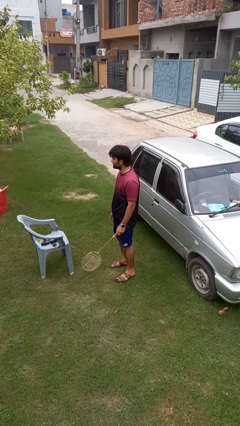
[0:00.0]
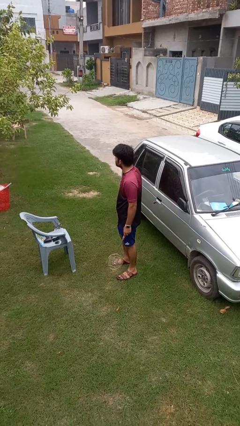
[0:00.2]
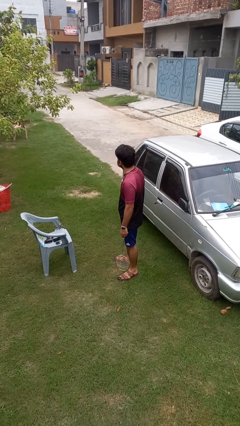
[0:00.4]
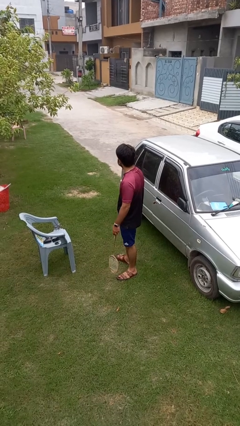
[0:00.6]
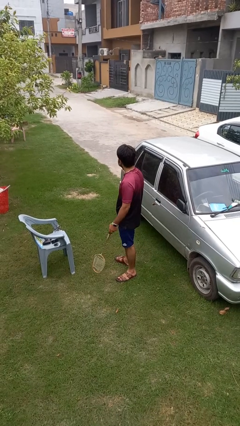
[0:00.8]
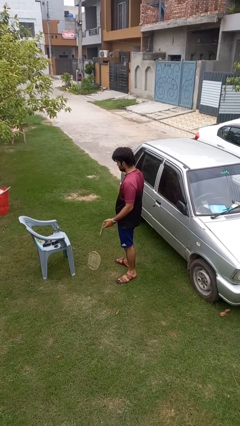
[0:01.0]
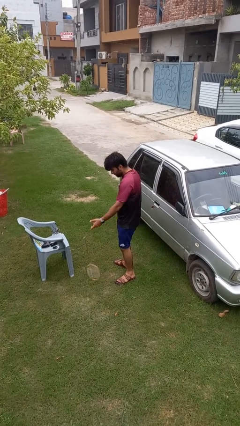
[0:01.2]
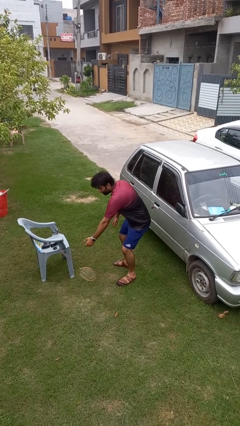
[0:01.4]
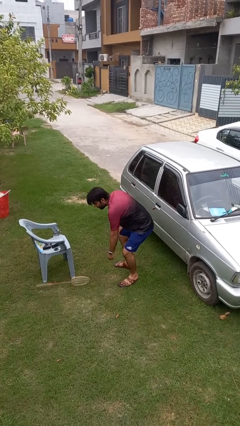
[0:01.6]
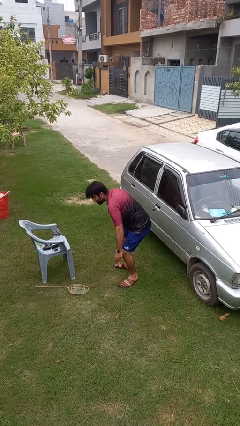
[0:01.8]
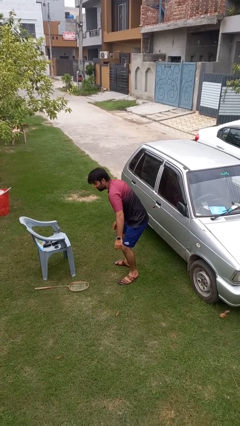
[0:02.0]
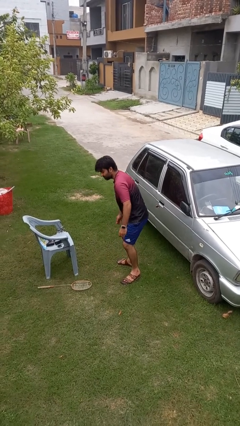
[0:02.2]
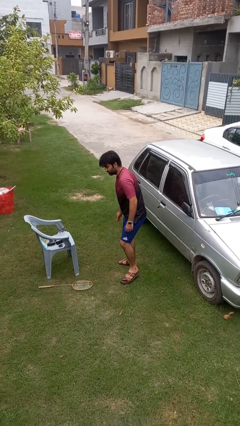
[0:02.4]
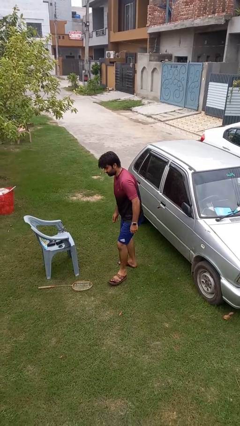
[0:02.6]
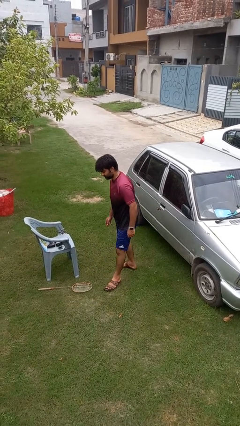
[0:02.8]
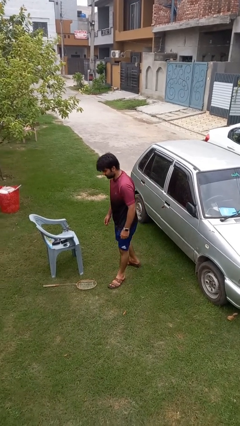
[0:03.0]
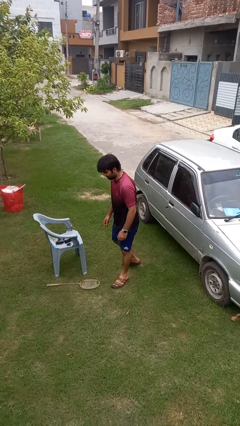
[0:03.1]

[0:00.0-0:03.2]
person drops object

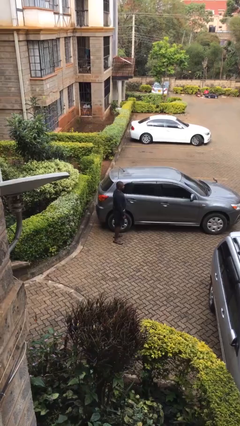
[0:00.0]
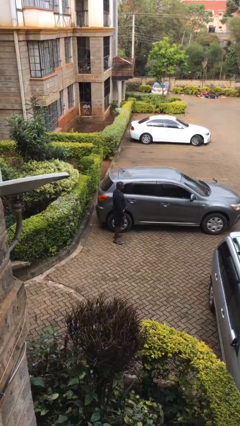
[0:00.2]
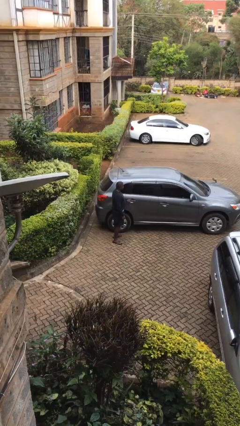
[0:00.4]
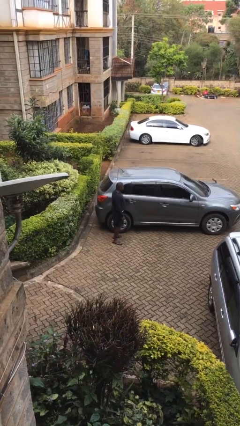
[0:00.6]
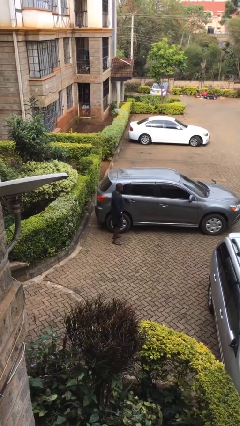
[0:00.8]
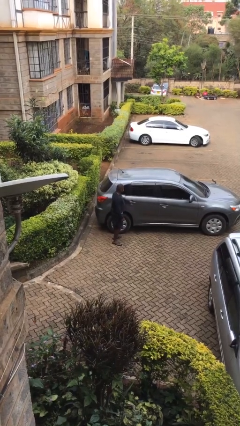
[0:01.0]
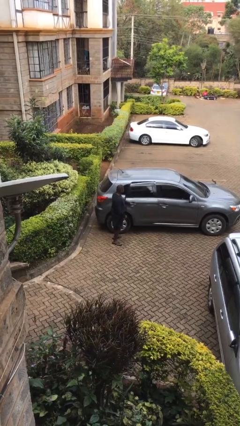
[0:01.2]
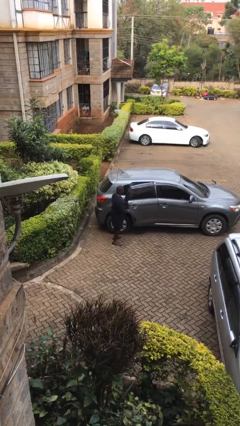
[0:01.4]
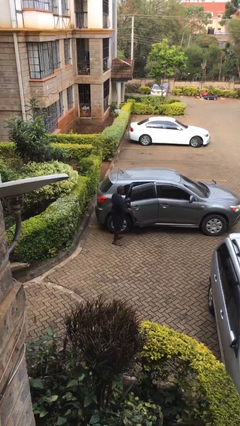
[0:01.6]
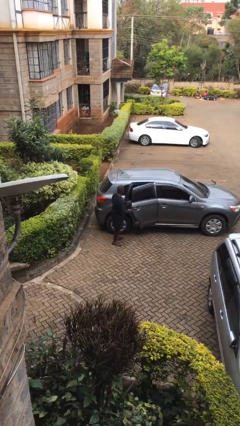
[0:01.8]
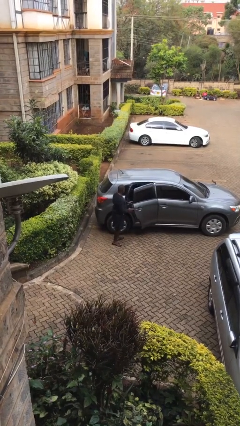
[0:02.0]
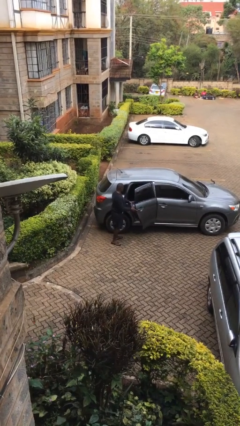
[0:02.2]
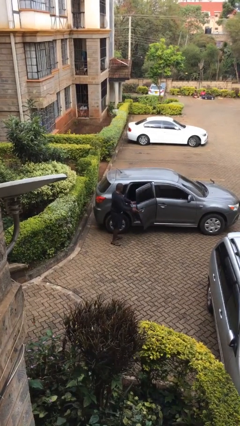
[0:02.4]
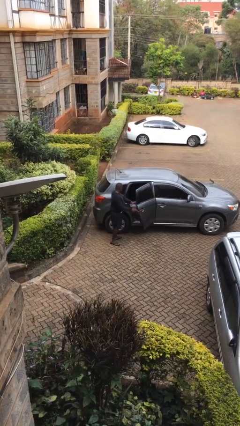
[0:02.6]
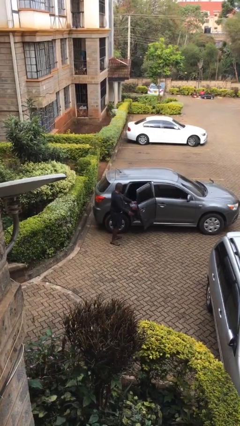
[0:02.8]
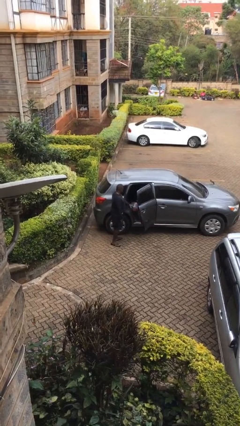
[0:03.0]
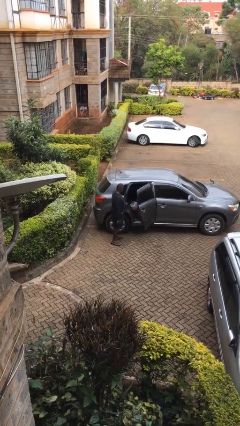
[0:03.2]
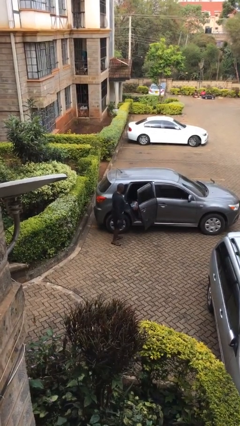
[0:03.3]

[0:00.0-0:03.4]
person opens car door

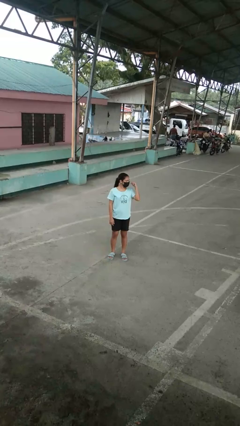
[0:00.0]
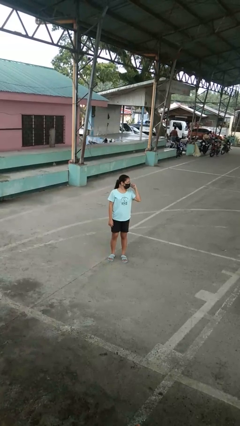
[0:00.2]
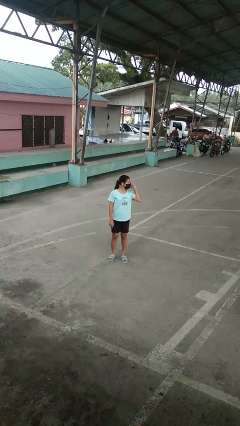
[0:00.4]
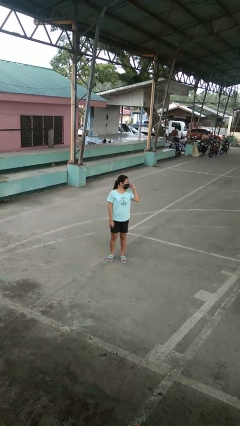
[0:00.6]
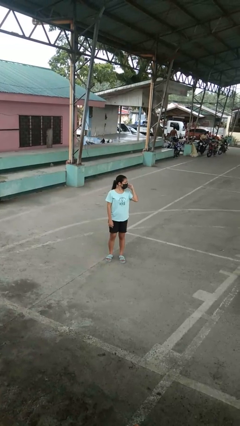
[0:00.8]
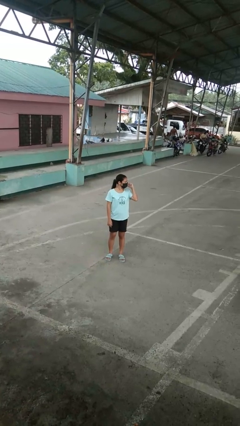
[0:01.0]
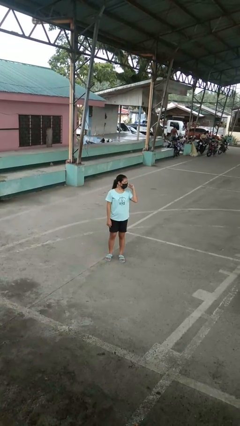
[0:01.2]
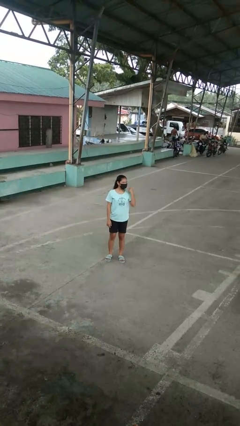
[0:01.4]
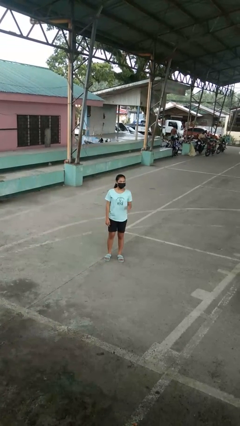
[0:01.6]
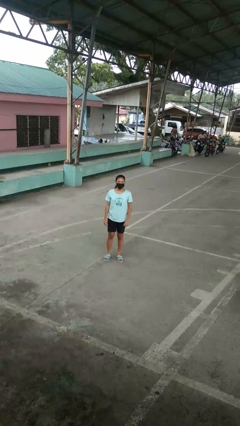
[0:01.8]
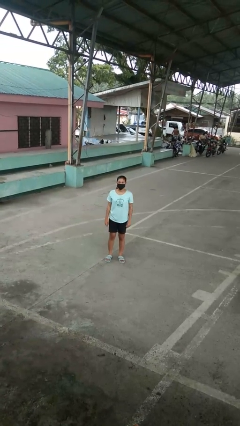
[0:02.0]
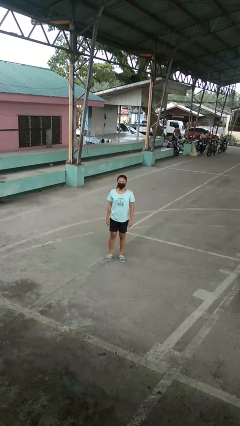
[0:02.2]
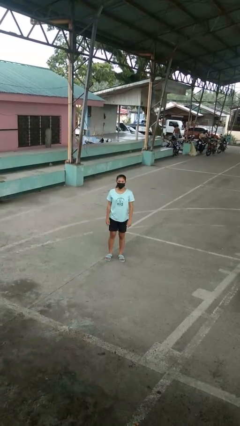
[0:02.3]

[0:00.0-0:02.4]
person gestures behind me

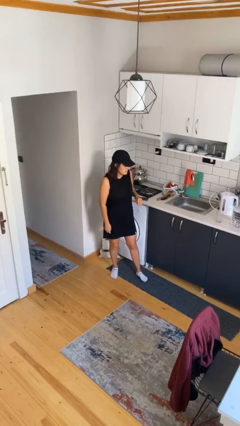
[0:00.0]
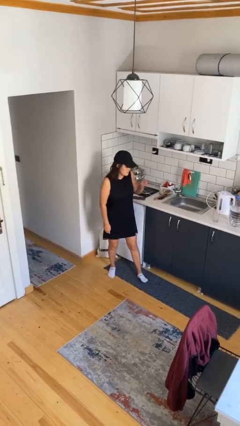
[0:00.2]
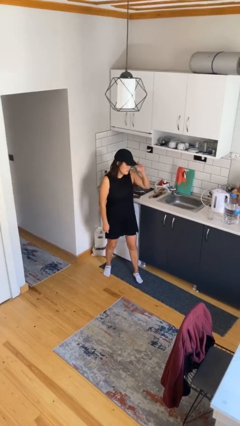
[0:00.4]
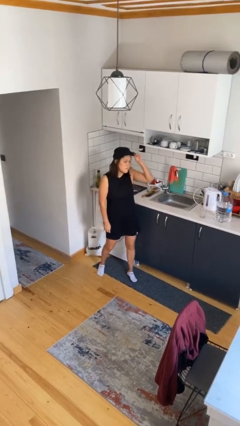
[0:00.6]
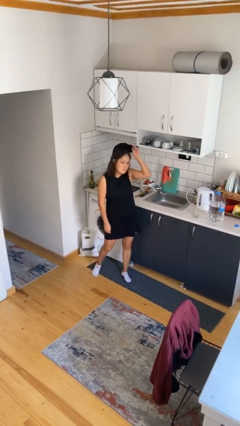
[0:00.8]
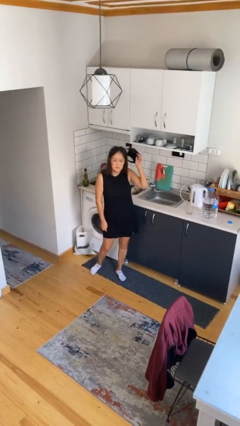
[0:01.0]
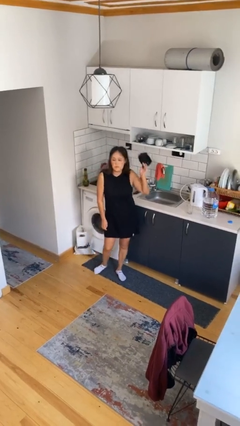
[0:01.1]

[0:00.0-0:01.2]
person takes off hat

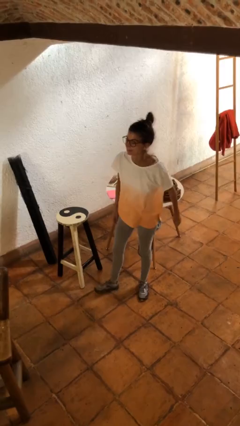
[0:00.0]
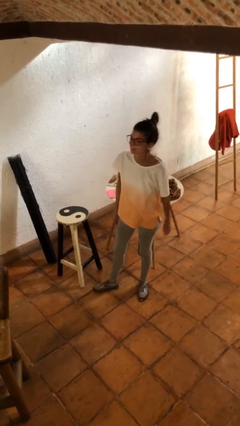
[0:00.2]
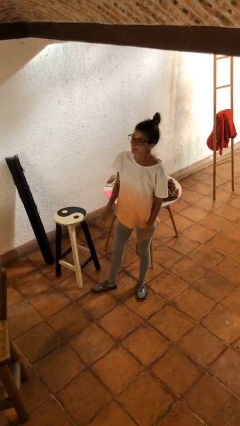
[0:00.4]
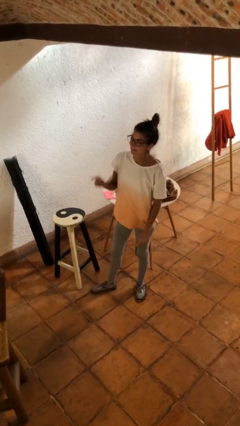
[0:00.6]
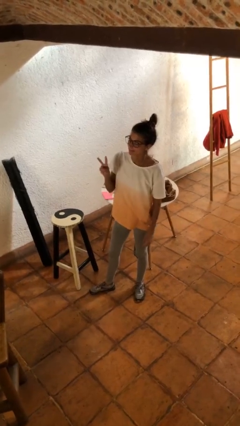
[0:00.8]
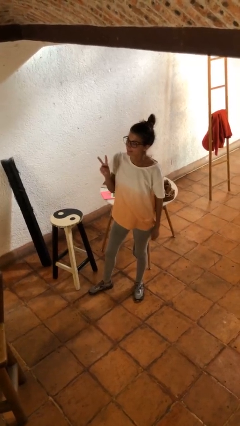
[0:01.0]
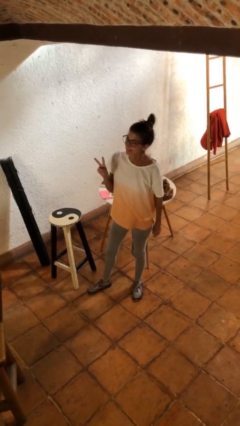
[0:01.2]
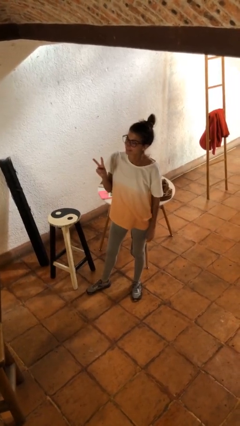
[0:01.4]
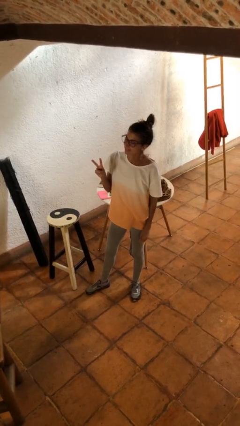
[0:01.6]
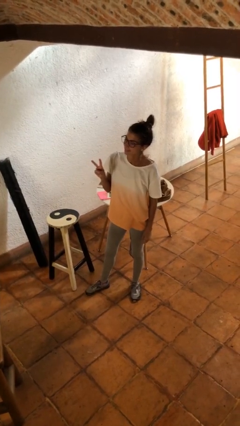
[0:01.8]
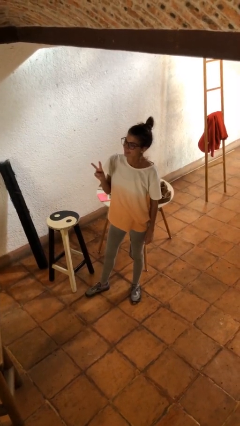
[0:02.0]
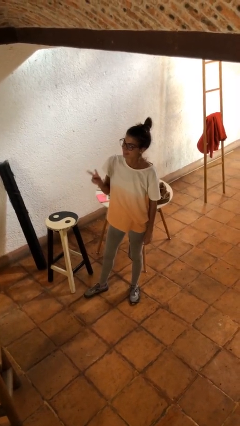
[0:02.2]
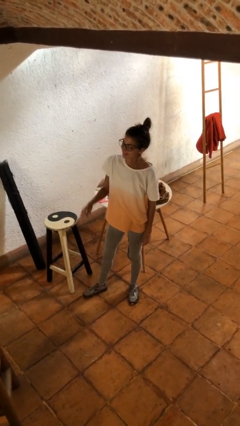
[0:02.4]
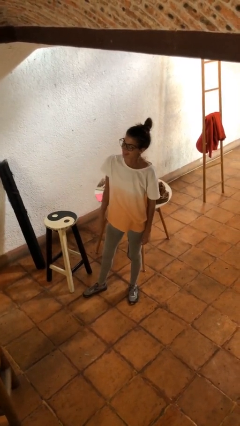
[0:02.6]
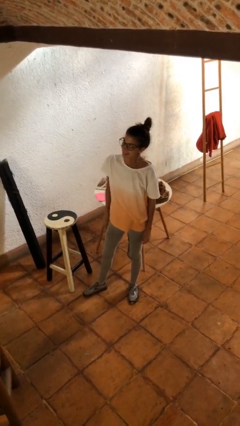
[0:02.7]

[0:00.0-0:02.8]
person gestures peace

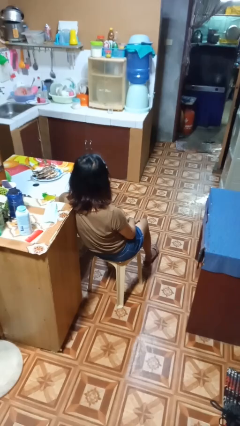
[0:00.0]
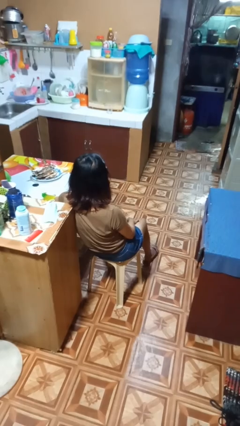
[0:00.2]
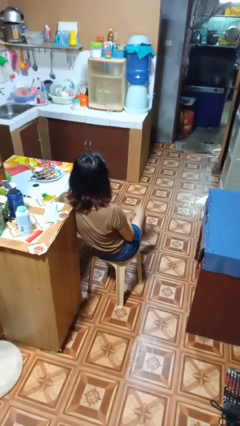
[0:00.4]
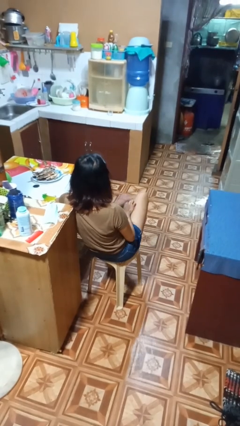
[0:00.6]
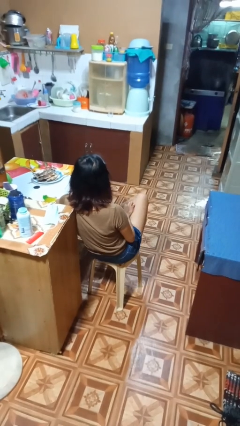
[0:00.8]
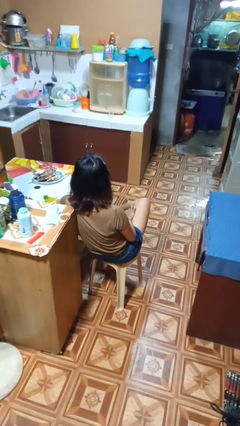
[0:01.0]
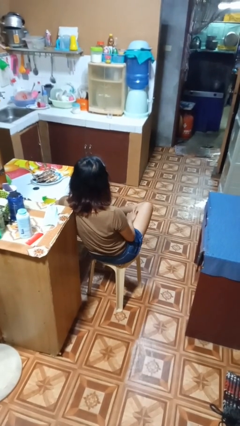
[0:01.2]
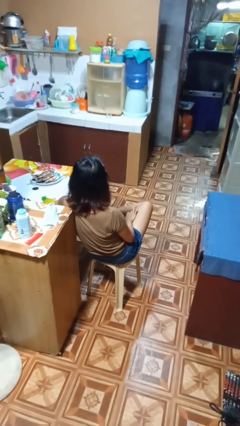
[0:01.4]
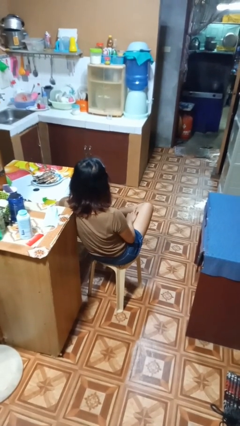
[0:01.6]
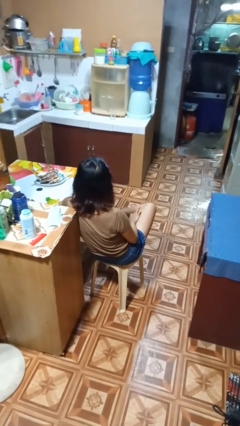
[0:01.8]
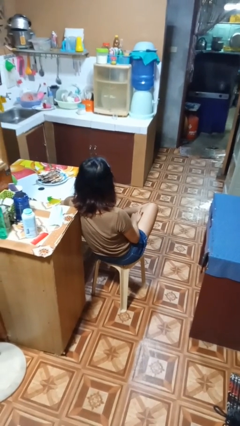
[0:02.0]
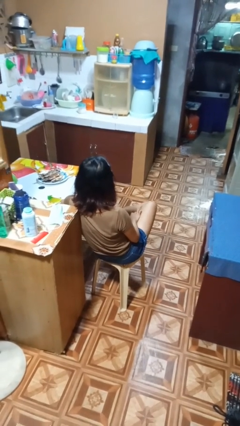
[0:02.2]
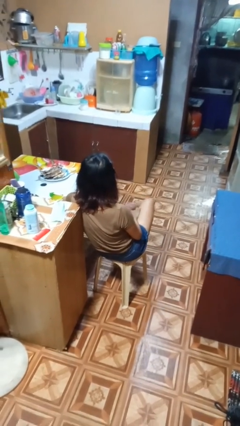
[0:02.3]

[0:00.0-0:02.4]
person crosses legs

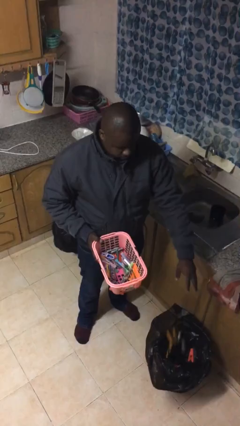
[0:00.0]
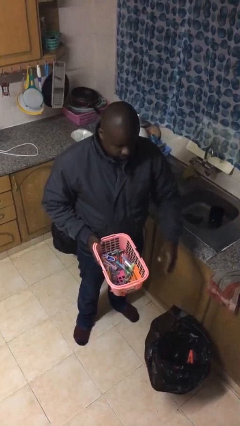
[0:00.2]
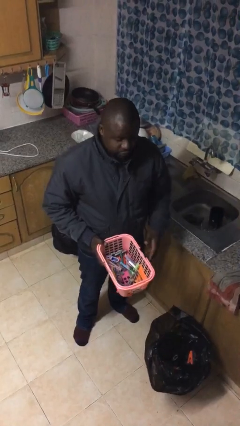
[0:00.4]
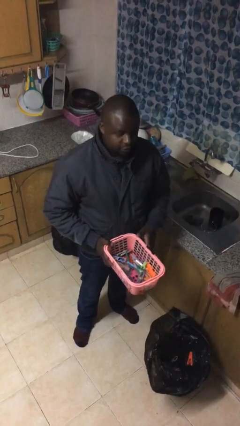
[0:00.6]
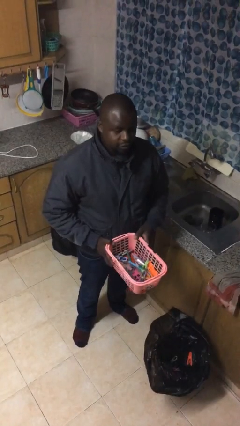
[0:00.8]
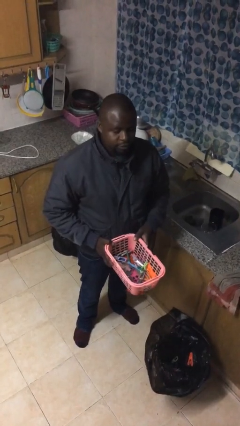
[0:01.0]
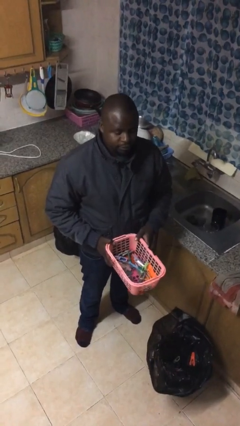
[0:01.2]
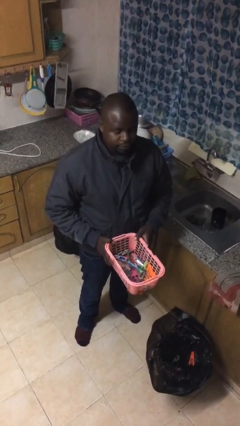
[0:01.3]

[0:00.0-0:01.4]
person discards trash
